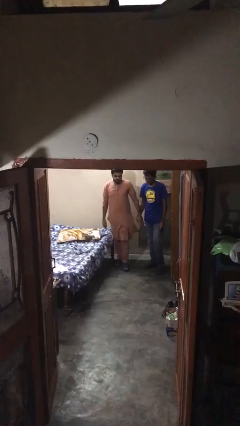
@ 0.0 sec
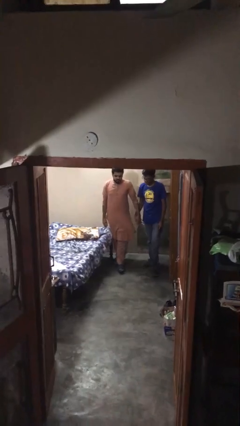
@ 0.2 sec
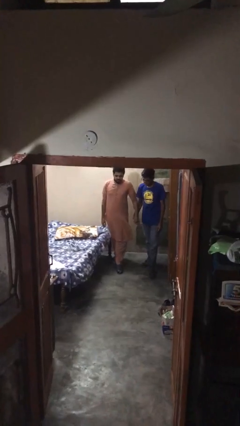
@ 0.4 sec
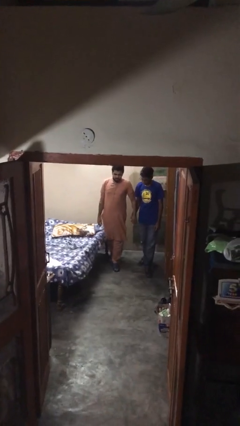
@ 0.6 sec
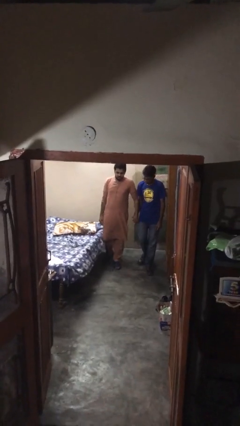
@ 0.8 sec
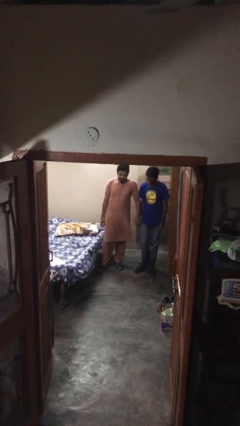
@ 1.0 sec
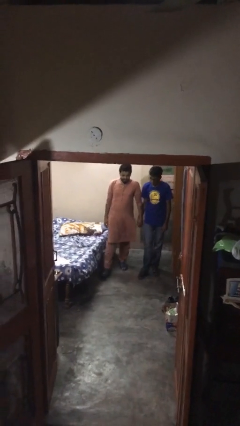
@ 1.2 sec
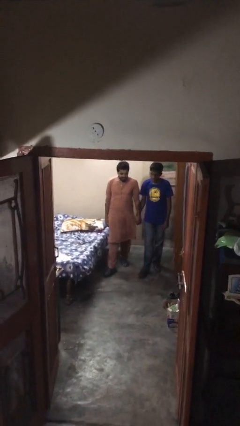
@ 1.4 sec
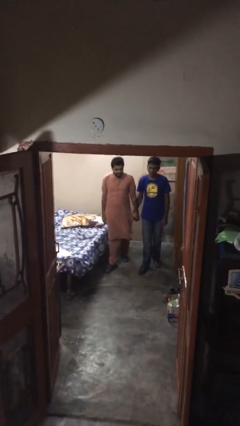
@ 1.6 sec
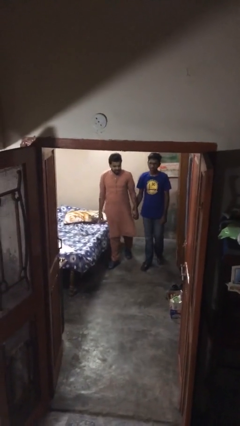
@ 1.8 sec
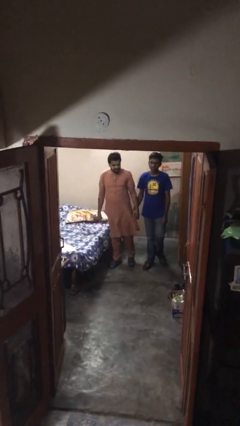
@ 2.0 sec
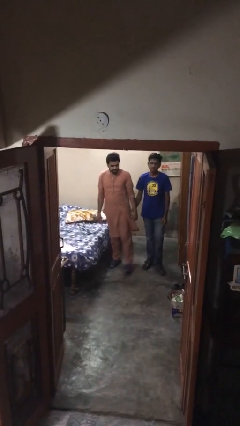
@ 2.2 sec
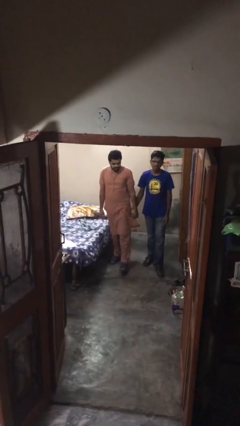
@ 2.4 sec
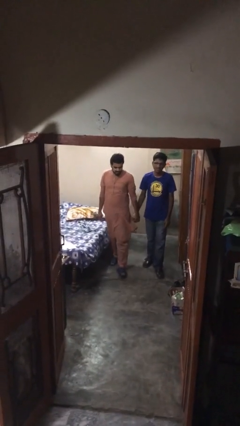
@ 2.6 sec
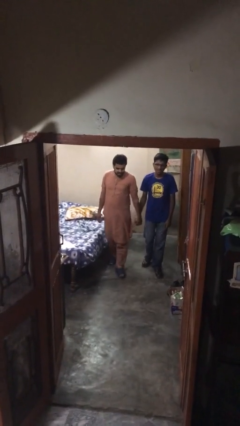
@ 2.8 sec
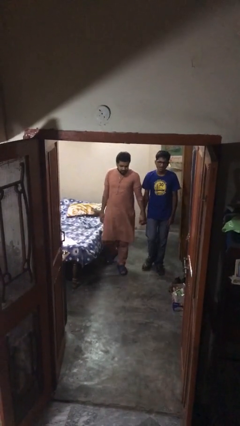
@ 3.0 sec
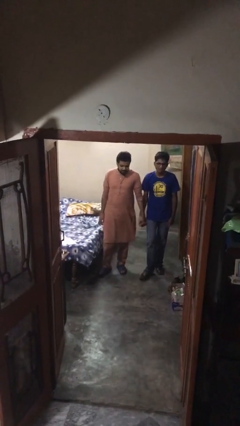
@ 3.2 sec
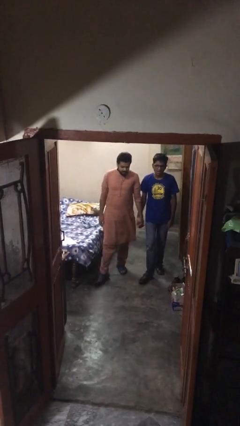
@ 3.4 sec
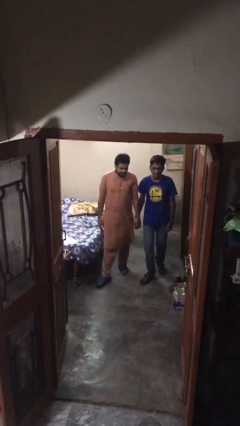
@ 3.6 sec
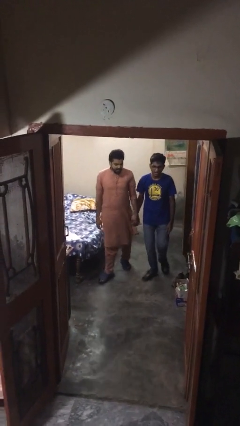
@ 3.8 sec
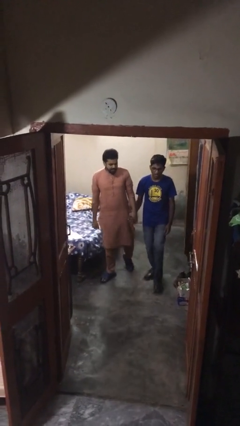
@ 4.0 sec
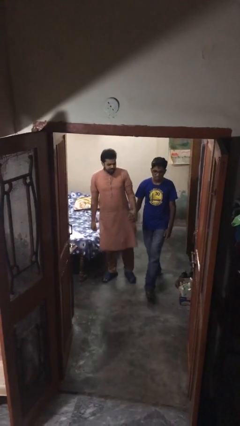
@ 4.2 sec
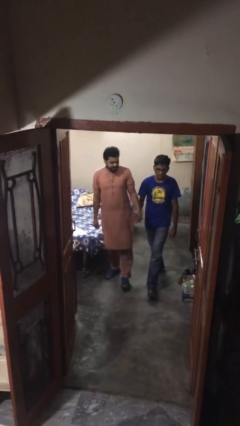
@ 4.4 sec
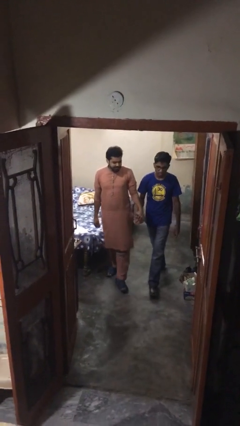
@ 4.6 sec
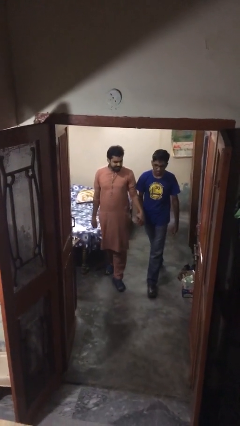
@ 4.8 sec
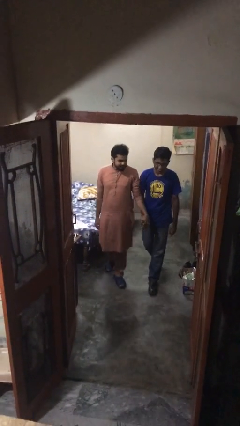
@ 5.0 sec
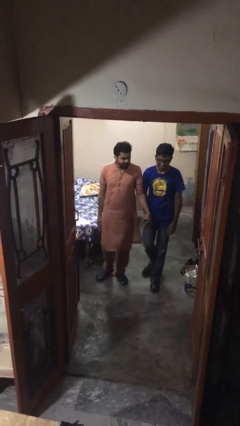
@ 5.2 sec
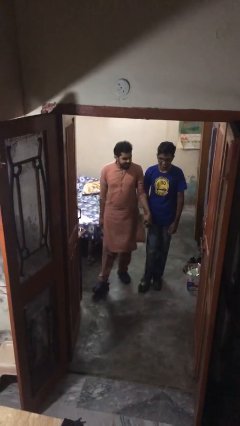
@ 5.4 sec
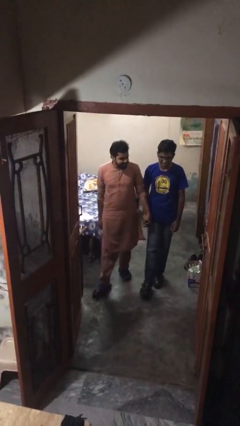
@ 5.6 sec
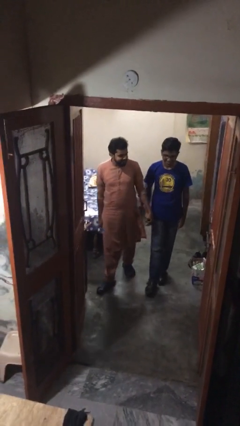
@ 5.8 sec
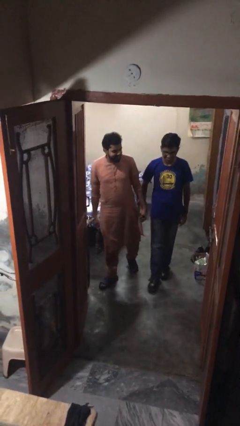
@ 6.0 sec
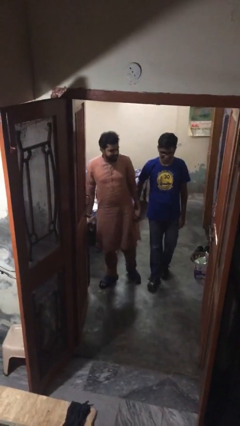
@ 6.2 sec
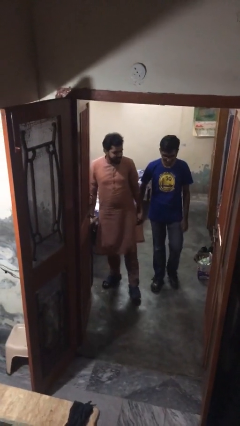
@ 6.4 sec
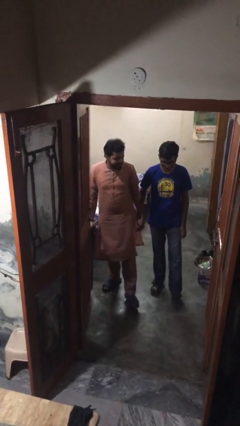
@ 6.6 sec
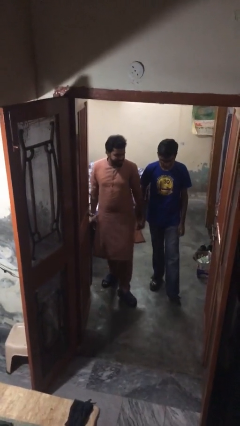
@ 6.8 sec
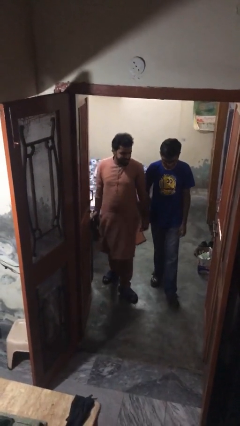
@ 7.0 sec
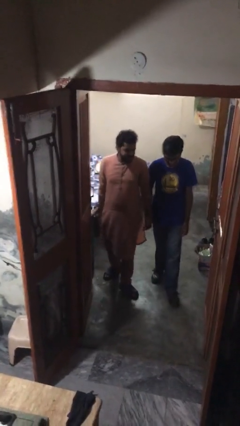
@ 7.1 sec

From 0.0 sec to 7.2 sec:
person holds hand

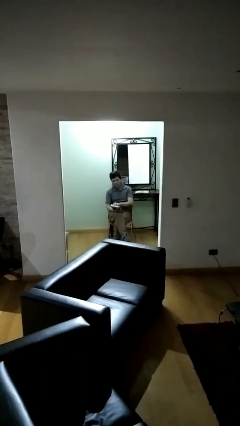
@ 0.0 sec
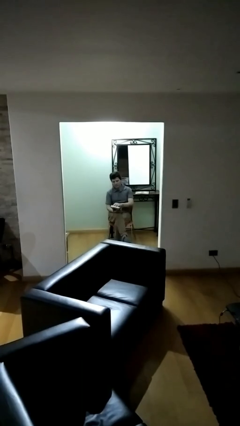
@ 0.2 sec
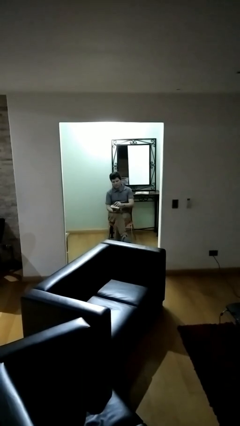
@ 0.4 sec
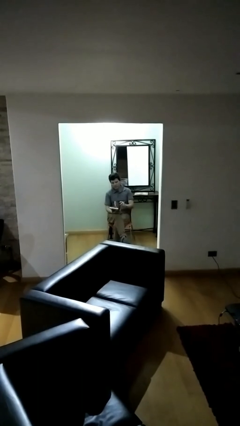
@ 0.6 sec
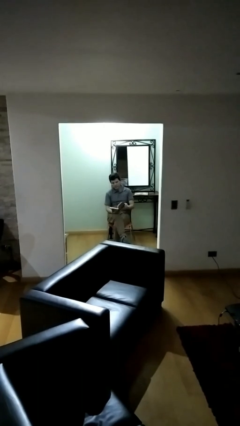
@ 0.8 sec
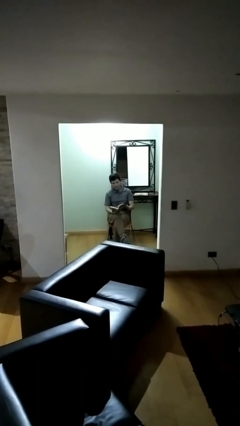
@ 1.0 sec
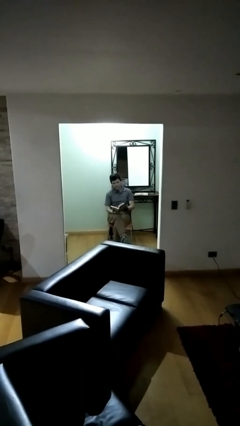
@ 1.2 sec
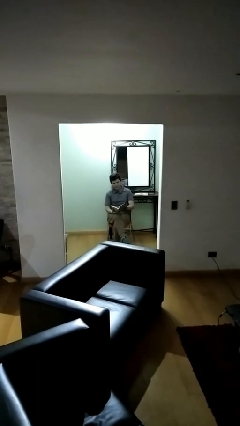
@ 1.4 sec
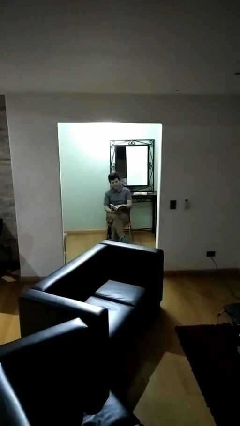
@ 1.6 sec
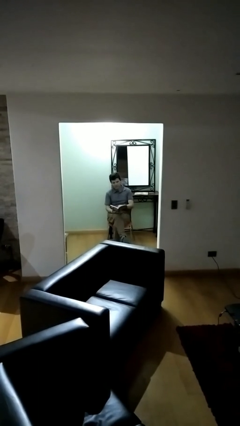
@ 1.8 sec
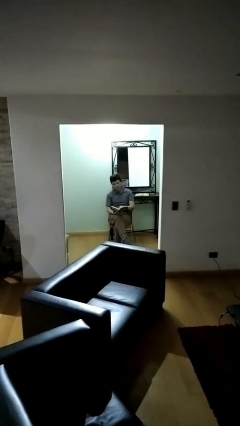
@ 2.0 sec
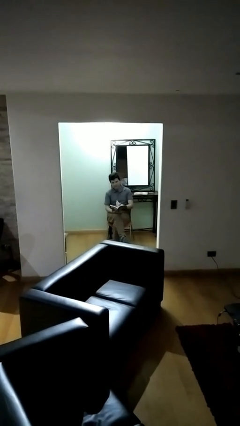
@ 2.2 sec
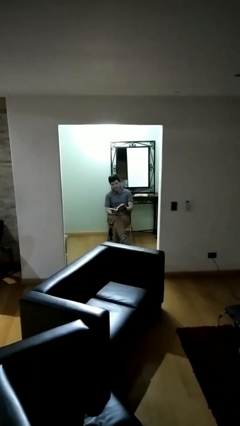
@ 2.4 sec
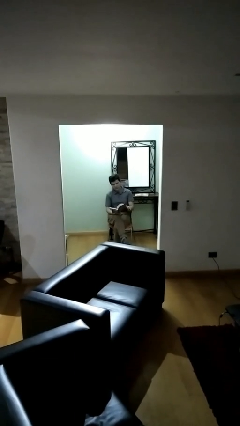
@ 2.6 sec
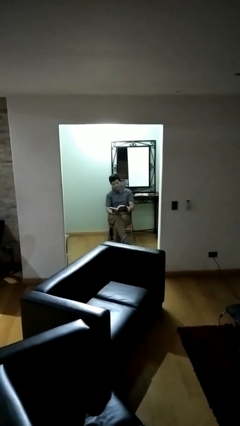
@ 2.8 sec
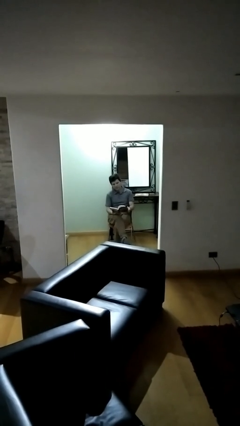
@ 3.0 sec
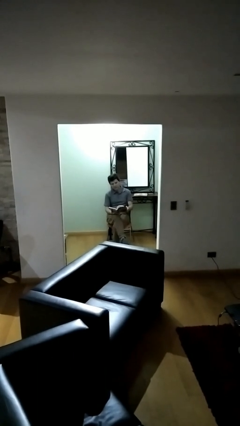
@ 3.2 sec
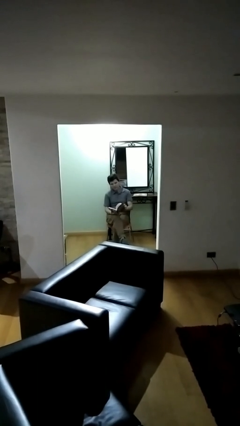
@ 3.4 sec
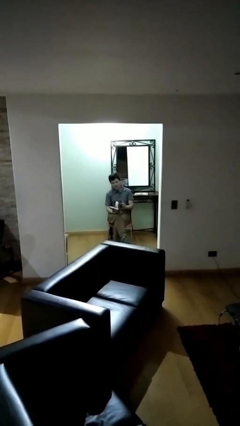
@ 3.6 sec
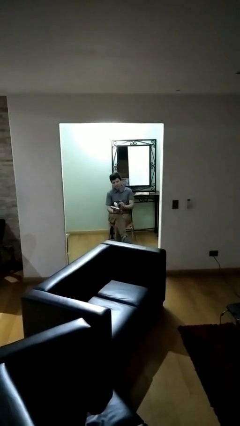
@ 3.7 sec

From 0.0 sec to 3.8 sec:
person reads document

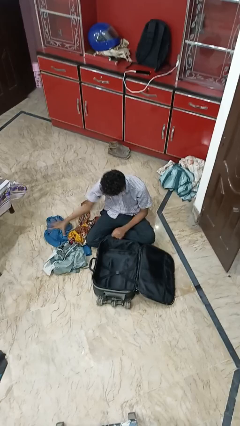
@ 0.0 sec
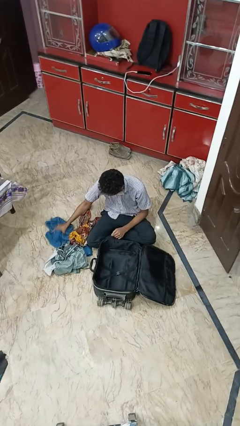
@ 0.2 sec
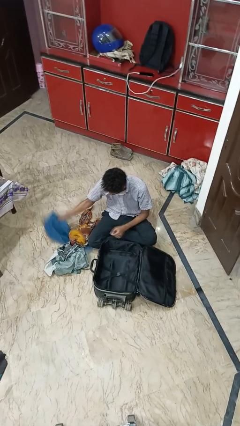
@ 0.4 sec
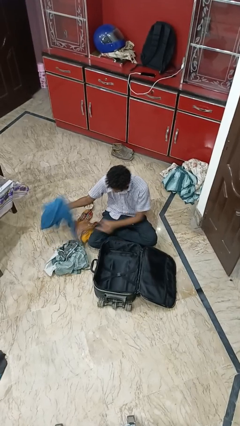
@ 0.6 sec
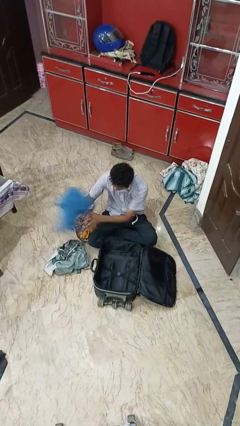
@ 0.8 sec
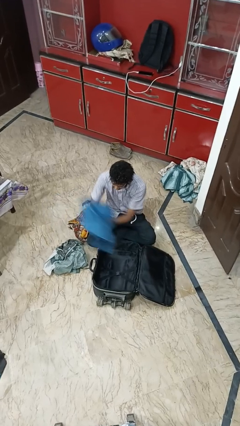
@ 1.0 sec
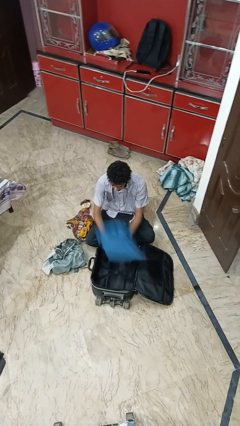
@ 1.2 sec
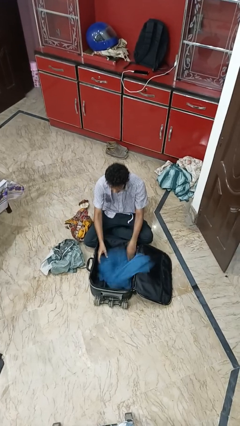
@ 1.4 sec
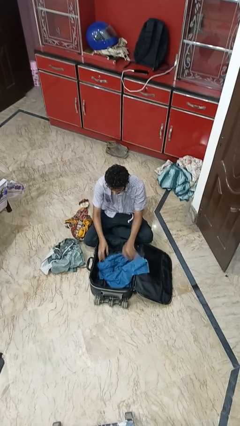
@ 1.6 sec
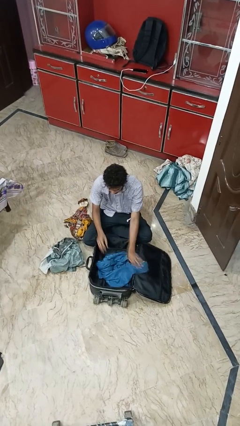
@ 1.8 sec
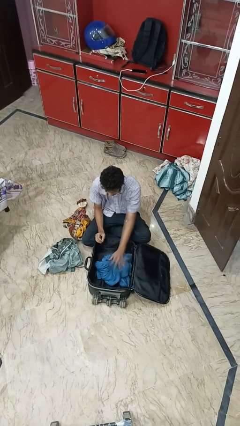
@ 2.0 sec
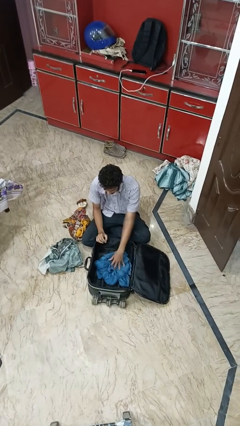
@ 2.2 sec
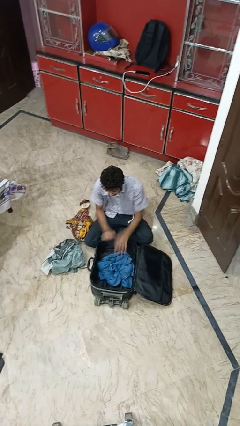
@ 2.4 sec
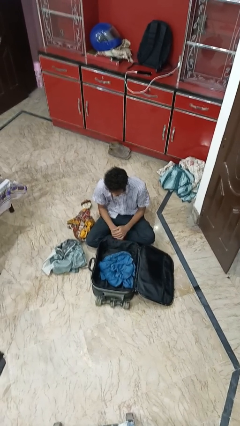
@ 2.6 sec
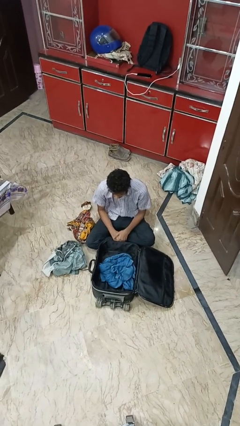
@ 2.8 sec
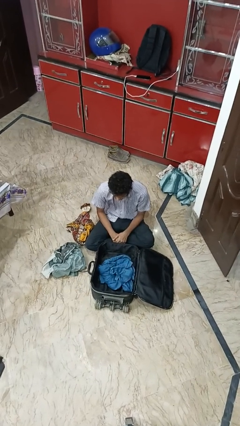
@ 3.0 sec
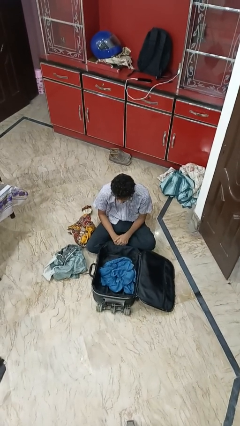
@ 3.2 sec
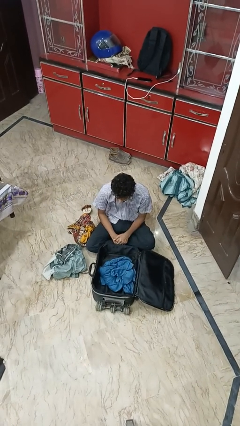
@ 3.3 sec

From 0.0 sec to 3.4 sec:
person loads clothes into suitcase

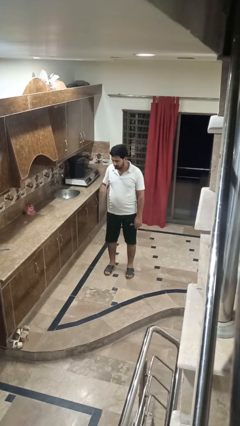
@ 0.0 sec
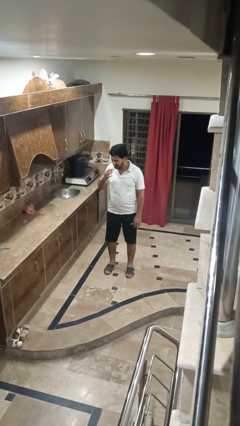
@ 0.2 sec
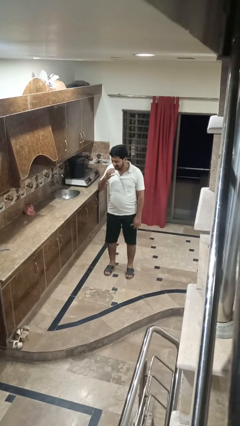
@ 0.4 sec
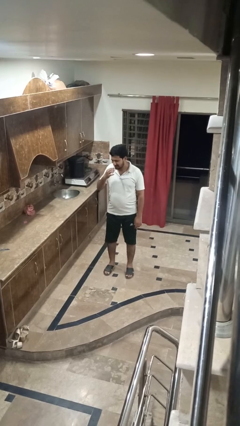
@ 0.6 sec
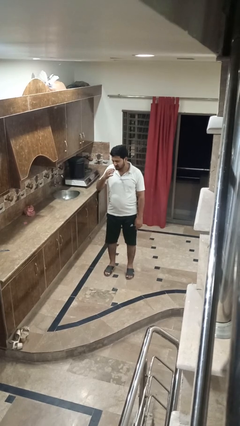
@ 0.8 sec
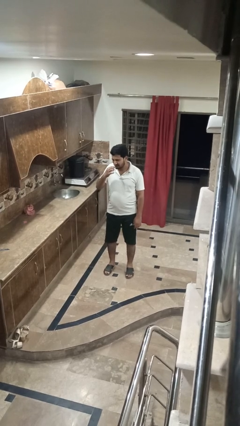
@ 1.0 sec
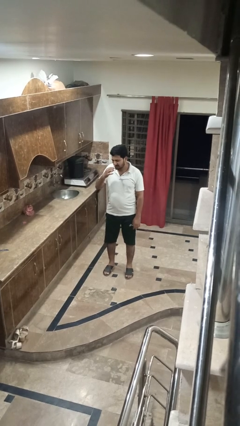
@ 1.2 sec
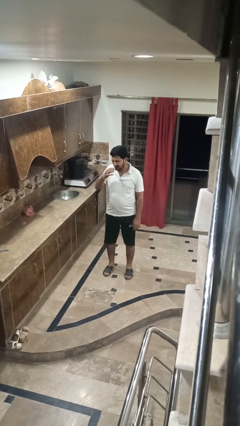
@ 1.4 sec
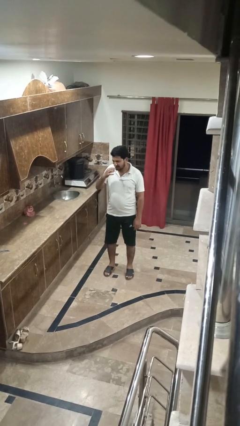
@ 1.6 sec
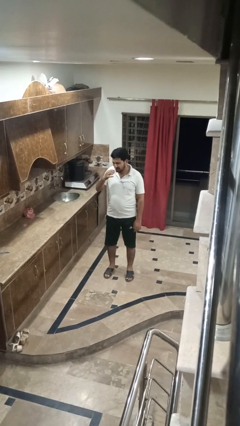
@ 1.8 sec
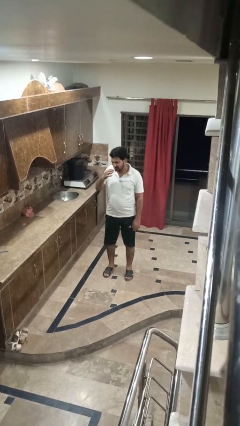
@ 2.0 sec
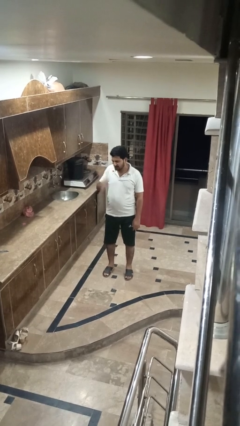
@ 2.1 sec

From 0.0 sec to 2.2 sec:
person brushes teeth

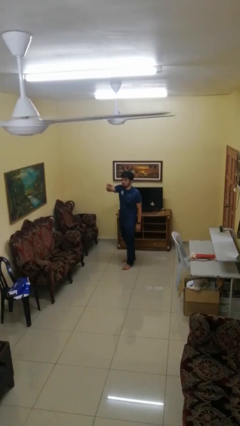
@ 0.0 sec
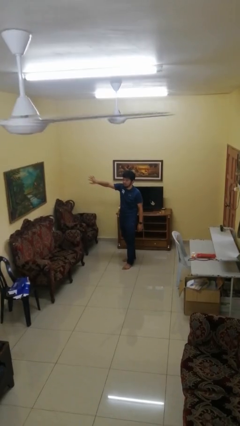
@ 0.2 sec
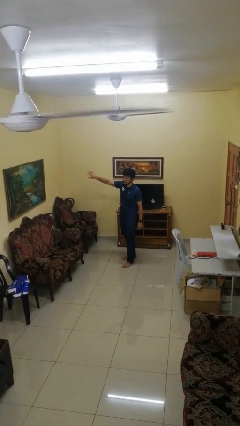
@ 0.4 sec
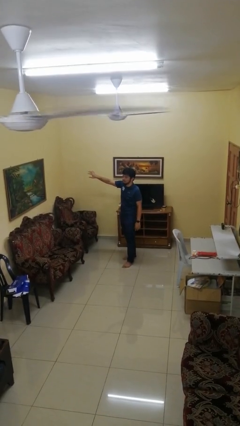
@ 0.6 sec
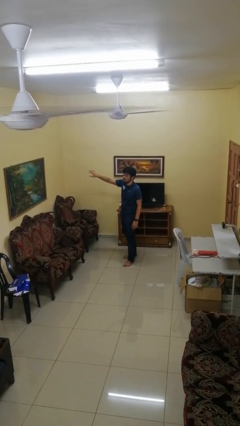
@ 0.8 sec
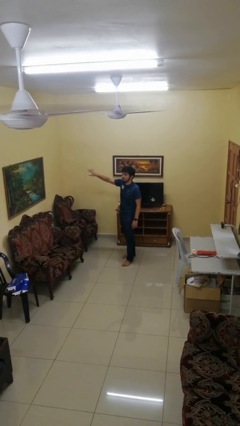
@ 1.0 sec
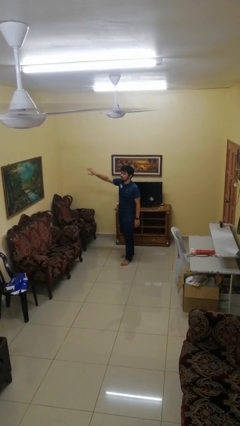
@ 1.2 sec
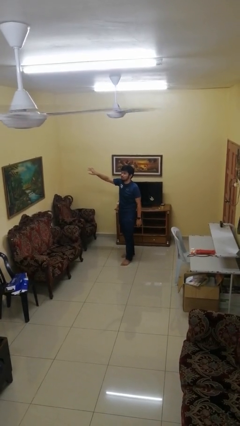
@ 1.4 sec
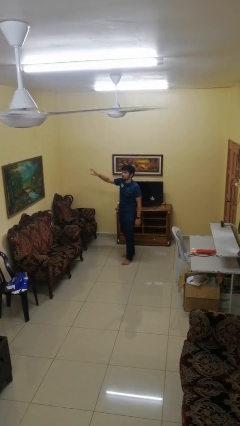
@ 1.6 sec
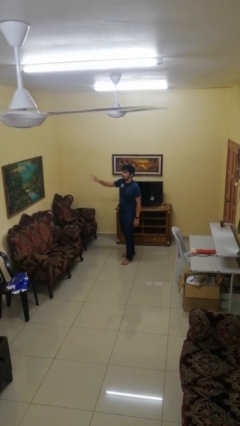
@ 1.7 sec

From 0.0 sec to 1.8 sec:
person gestures swipe right